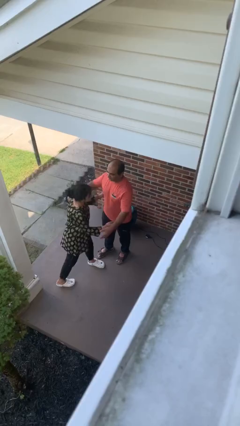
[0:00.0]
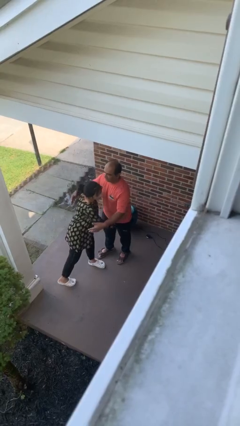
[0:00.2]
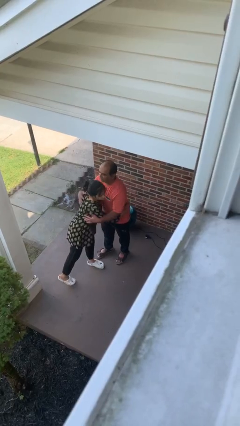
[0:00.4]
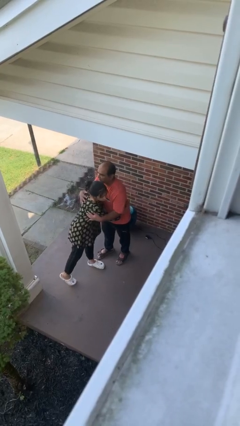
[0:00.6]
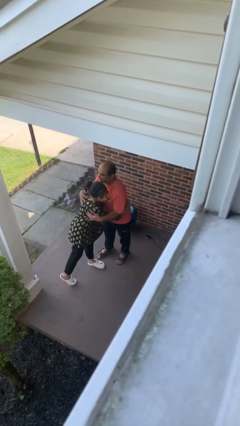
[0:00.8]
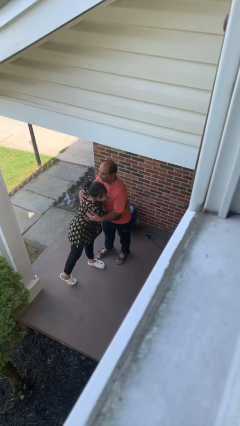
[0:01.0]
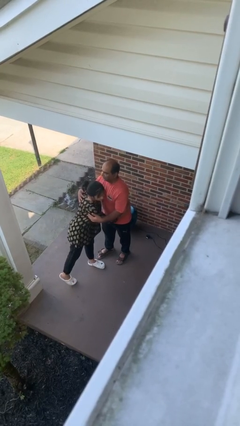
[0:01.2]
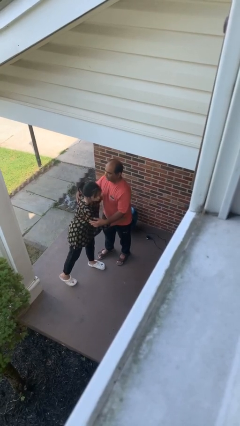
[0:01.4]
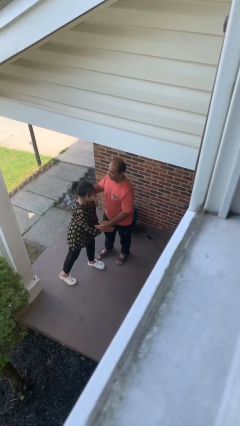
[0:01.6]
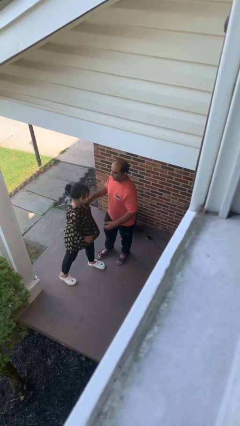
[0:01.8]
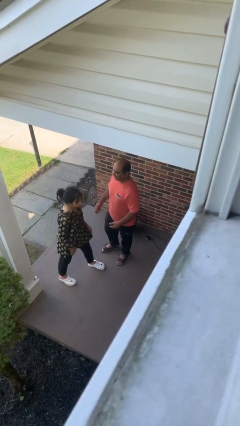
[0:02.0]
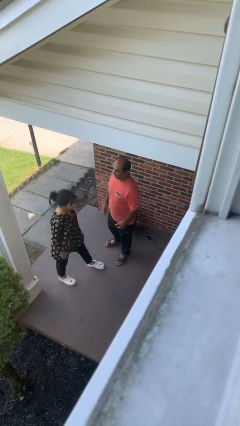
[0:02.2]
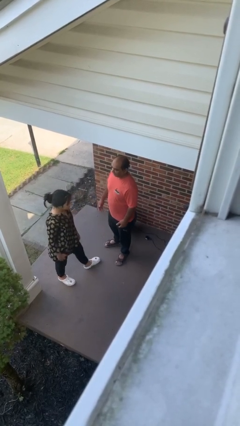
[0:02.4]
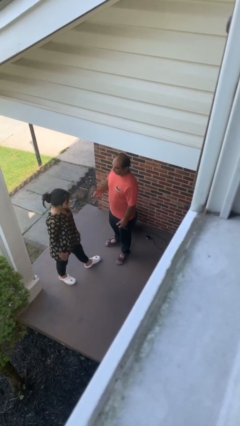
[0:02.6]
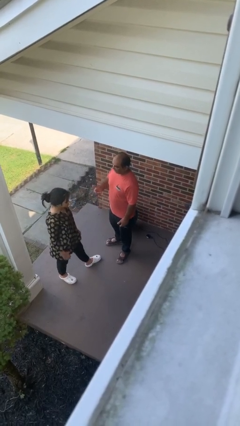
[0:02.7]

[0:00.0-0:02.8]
person embraces person

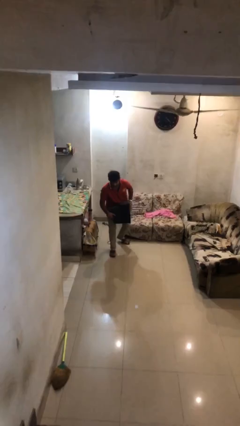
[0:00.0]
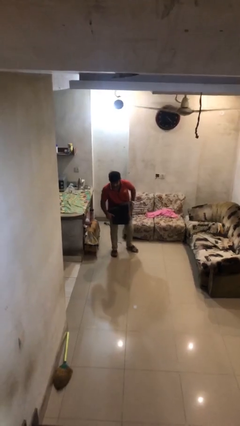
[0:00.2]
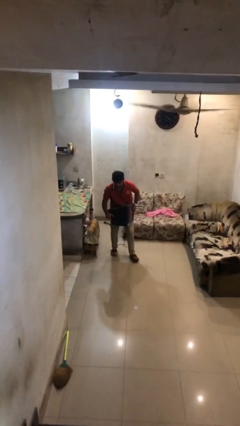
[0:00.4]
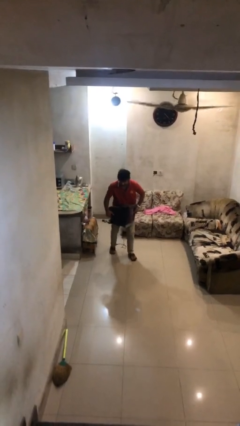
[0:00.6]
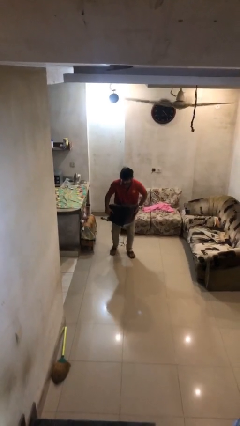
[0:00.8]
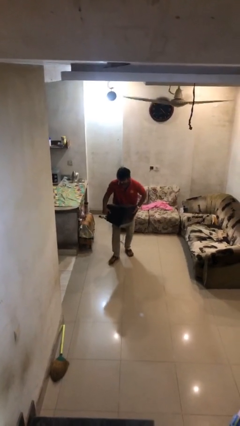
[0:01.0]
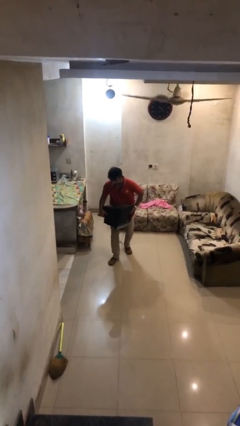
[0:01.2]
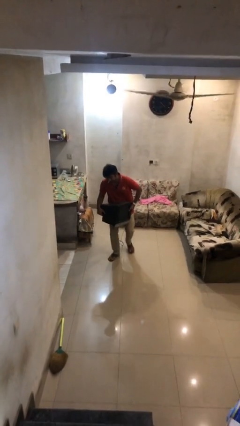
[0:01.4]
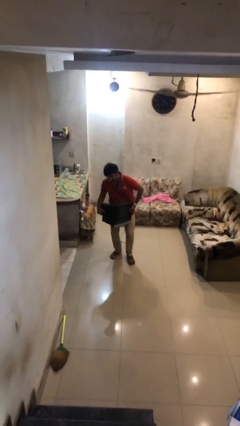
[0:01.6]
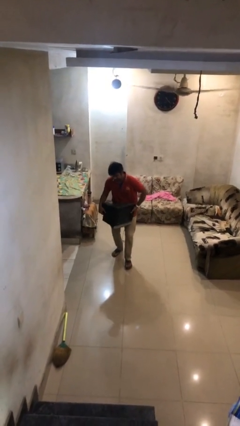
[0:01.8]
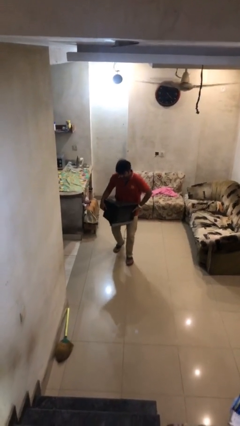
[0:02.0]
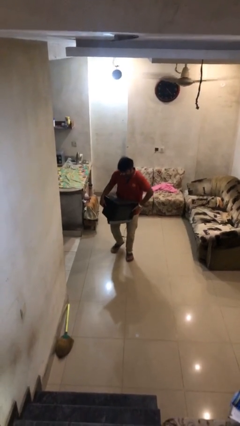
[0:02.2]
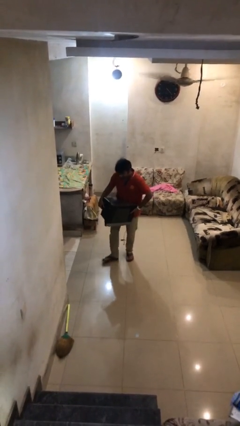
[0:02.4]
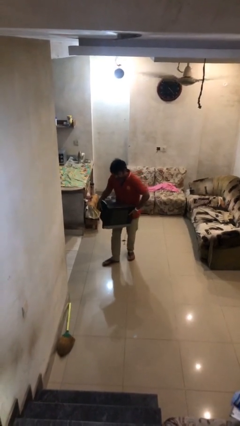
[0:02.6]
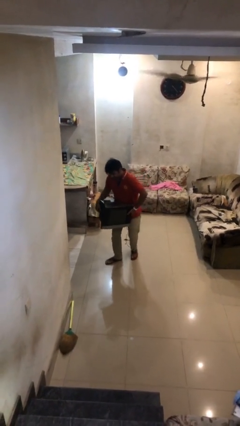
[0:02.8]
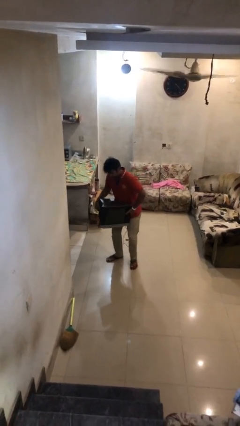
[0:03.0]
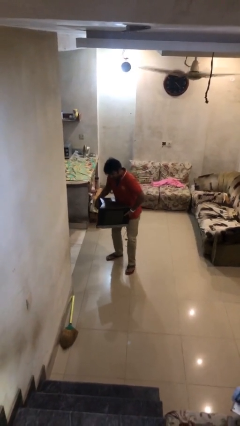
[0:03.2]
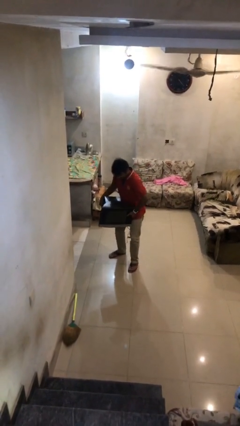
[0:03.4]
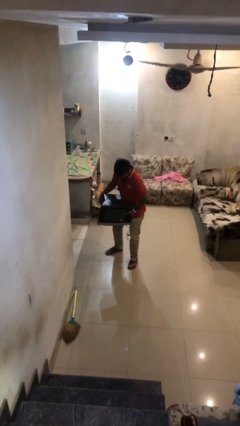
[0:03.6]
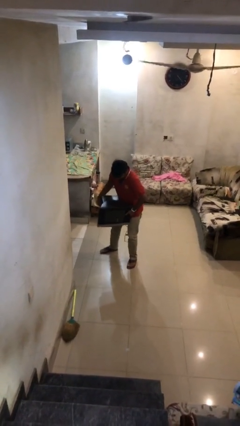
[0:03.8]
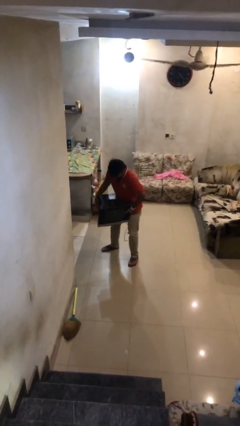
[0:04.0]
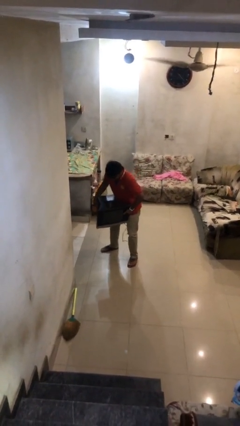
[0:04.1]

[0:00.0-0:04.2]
person carries heavy object

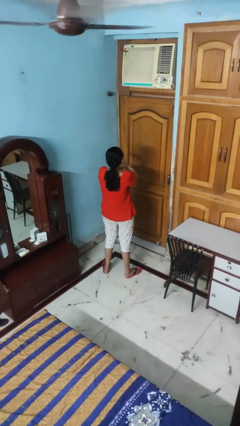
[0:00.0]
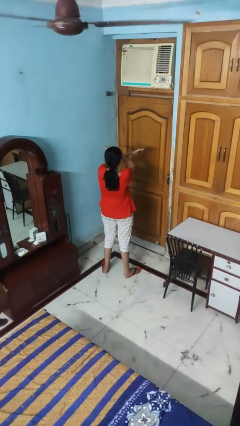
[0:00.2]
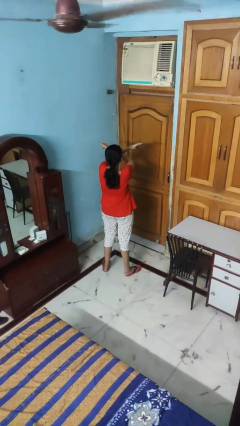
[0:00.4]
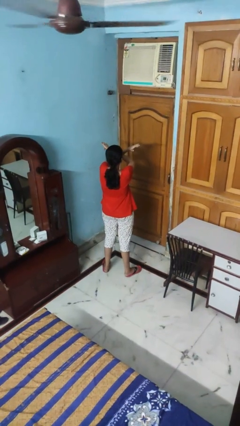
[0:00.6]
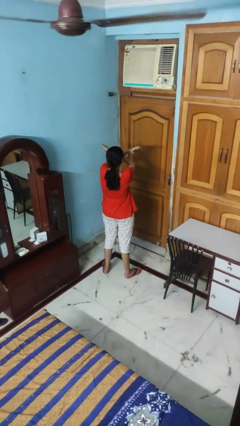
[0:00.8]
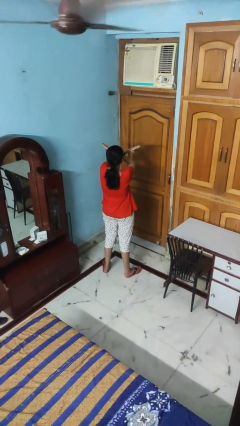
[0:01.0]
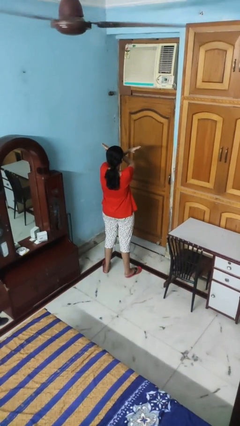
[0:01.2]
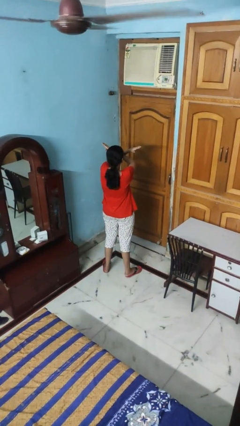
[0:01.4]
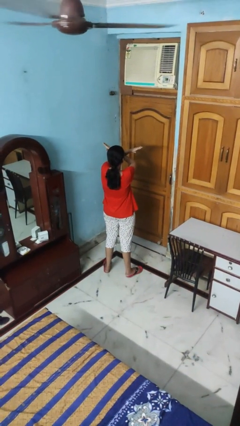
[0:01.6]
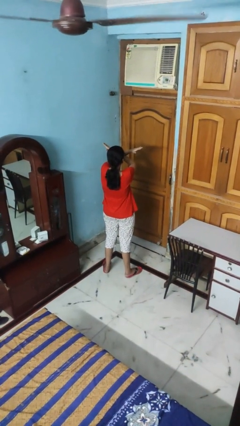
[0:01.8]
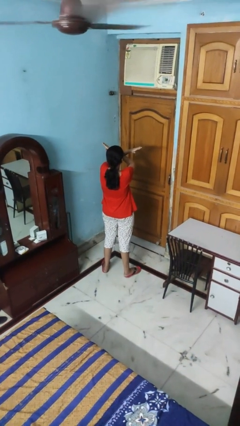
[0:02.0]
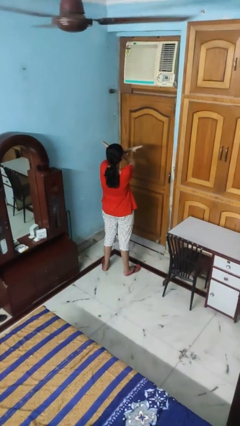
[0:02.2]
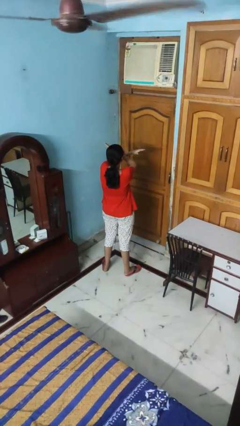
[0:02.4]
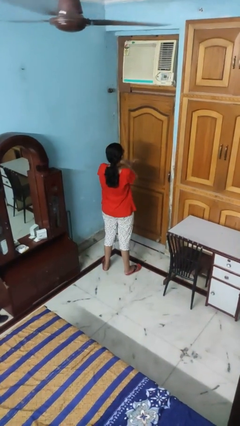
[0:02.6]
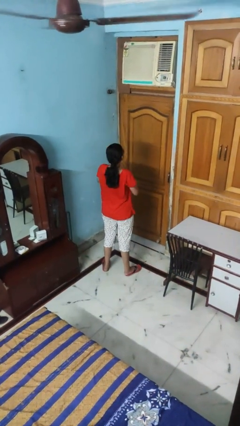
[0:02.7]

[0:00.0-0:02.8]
person gestures arms x

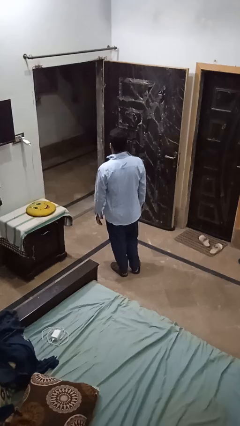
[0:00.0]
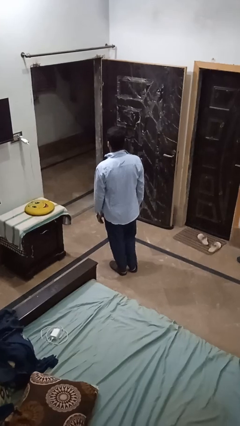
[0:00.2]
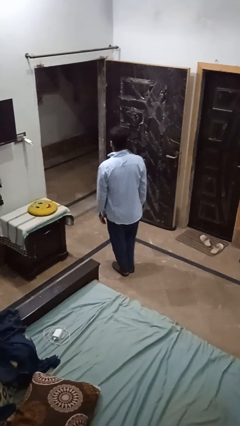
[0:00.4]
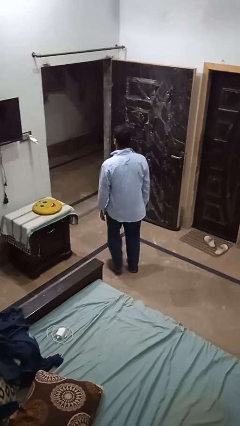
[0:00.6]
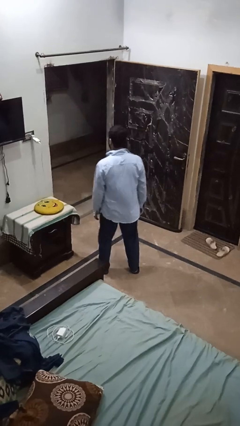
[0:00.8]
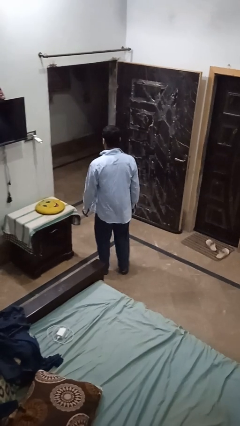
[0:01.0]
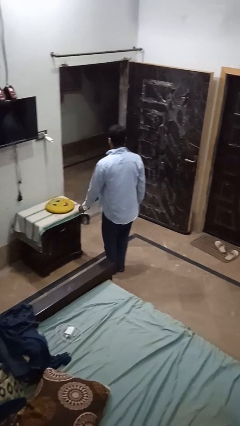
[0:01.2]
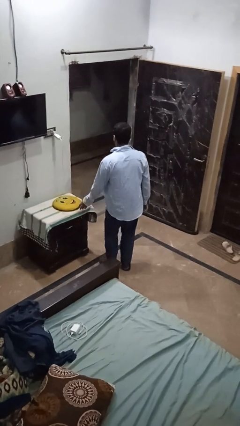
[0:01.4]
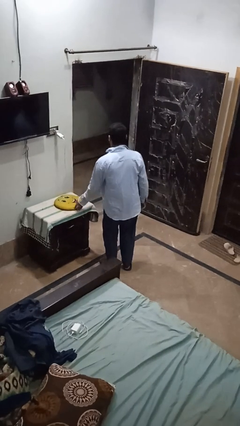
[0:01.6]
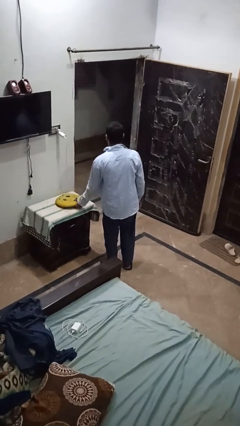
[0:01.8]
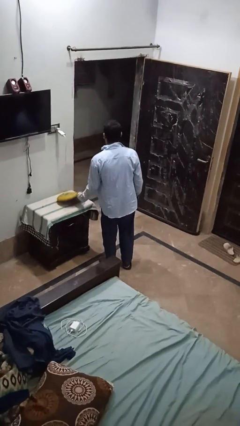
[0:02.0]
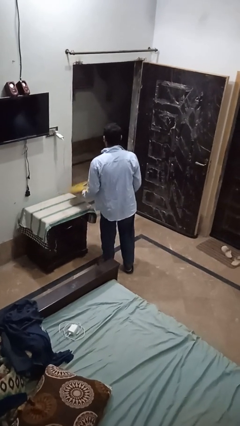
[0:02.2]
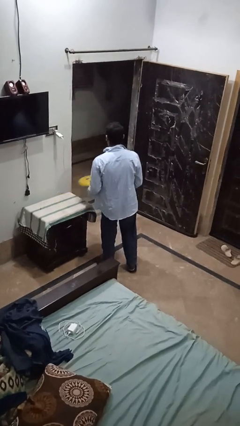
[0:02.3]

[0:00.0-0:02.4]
person picks up object from table

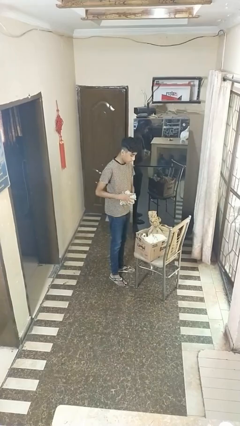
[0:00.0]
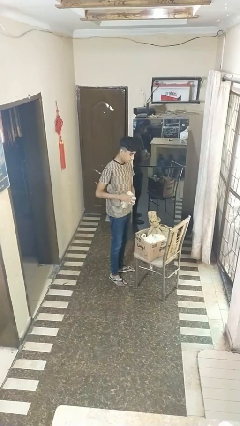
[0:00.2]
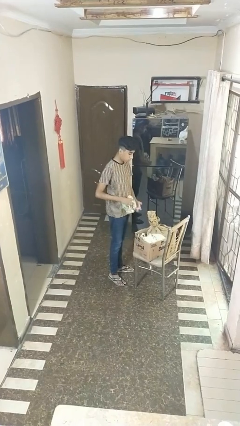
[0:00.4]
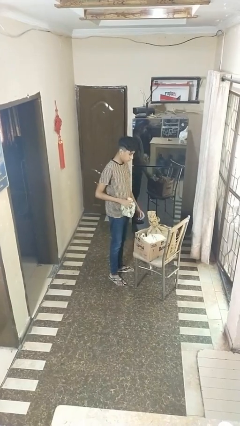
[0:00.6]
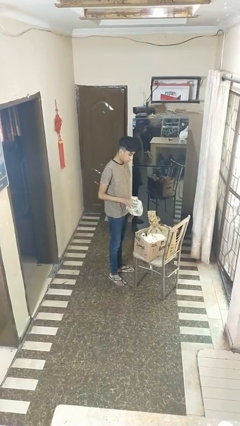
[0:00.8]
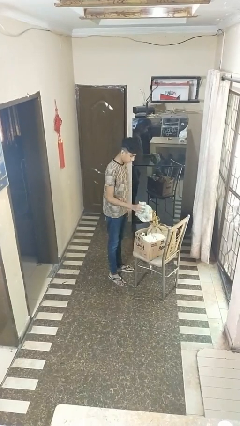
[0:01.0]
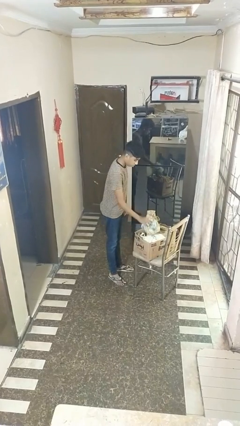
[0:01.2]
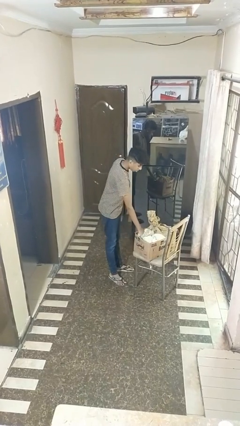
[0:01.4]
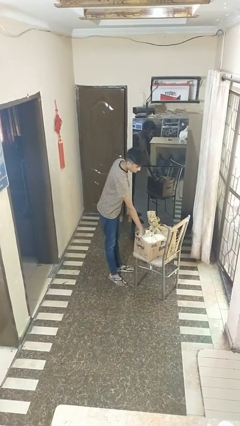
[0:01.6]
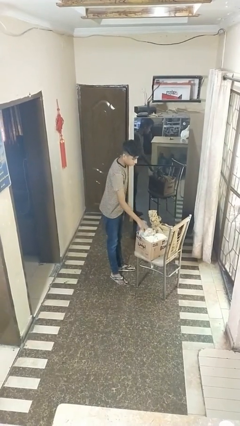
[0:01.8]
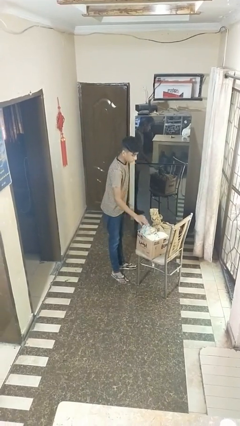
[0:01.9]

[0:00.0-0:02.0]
person puts object into box

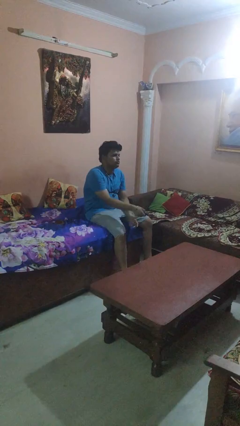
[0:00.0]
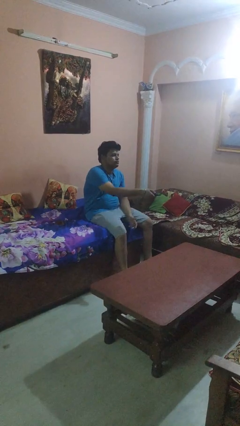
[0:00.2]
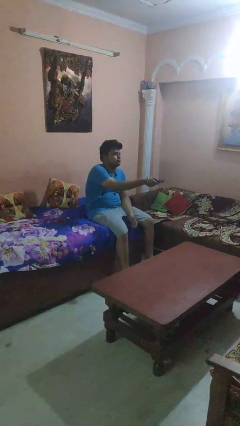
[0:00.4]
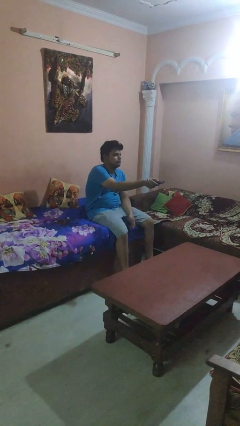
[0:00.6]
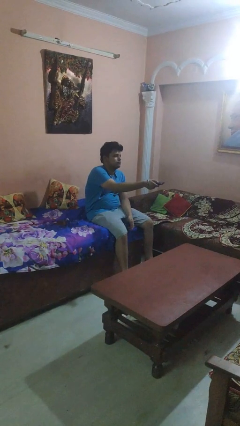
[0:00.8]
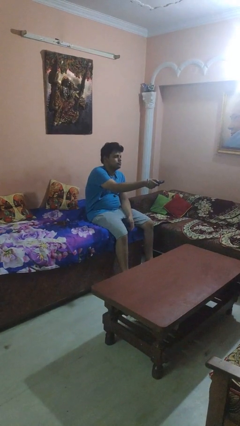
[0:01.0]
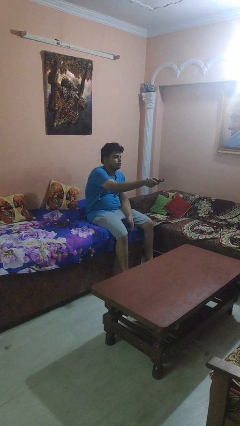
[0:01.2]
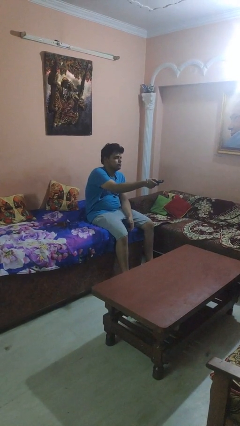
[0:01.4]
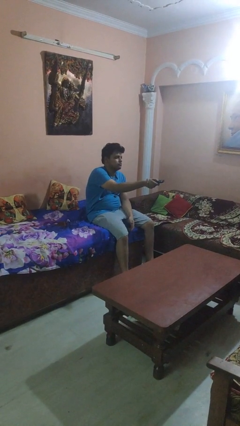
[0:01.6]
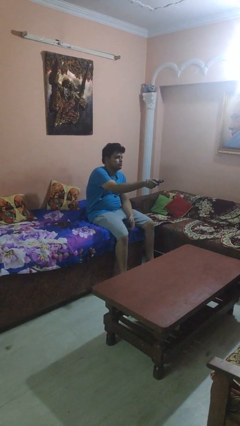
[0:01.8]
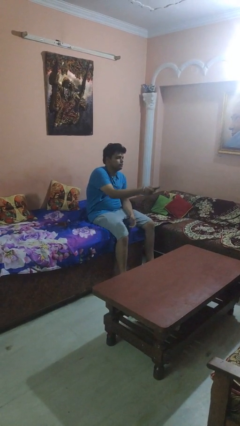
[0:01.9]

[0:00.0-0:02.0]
person uses television remote

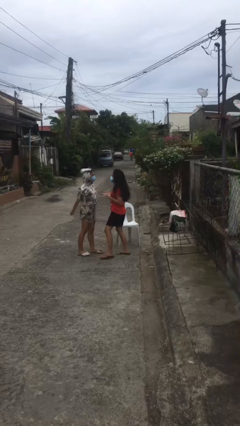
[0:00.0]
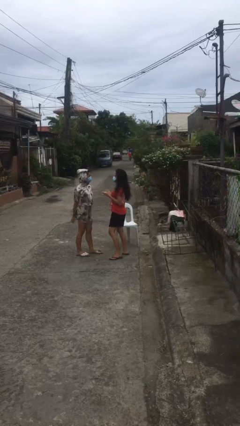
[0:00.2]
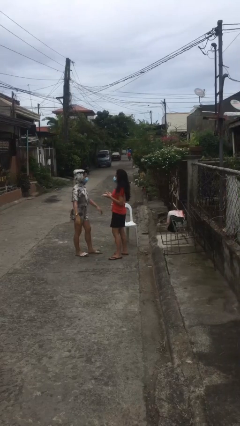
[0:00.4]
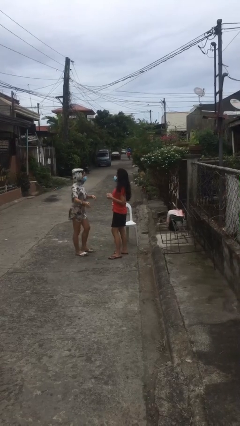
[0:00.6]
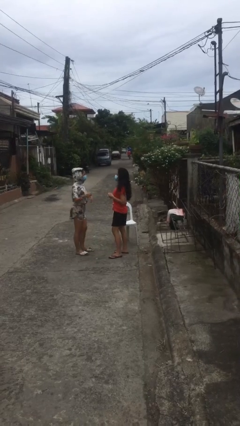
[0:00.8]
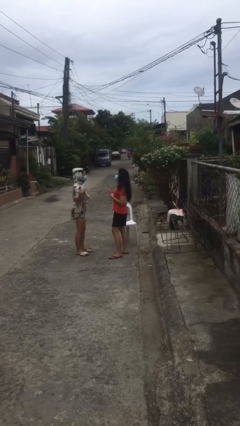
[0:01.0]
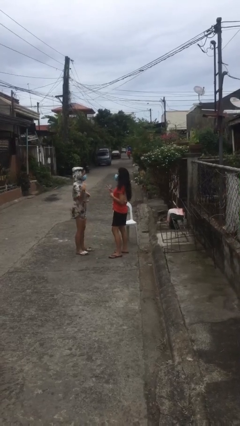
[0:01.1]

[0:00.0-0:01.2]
person talks to person

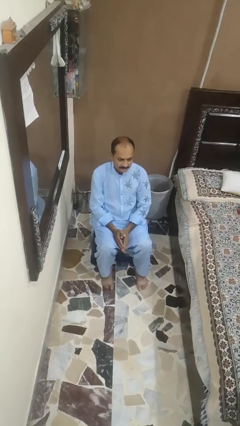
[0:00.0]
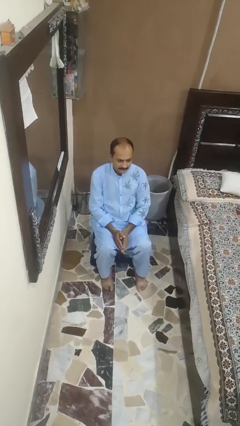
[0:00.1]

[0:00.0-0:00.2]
person covers face with hands
